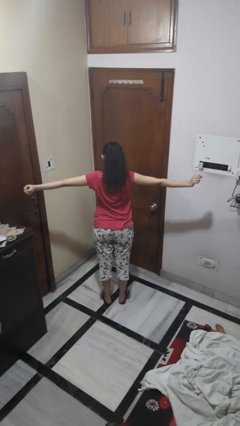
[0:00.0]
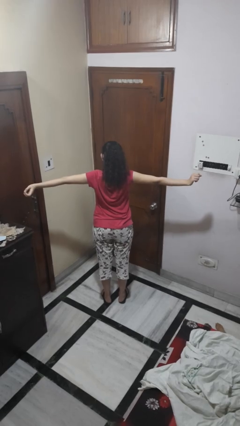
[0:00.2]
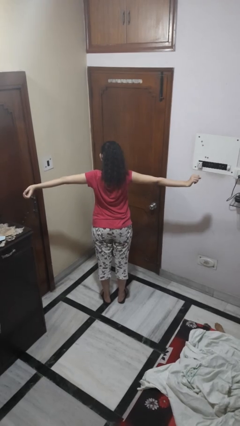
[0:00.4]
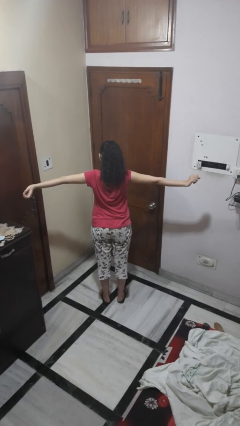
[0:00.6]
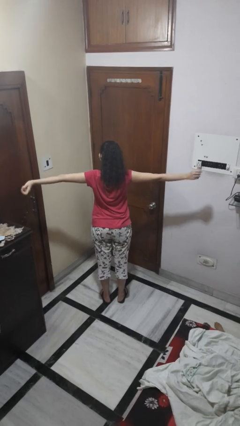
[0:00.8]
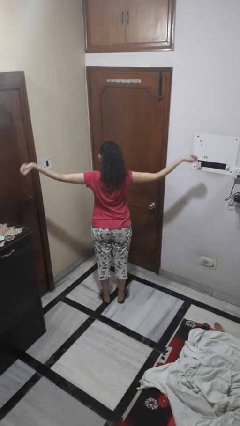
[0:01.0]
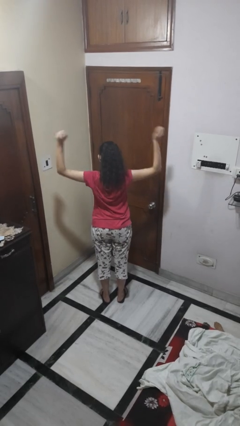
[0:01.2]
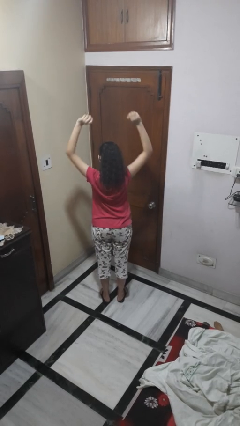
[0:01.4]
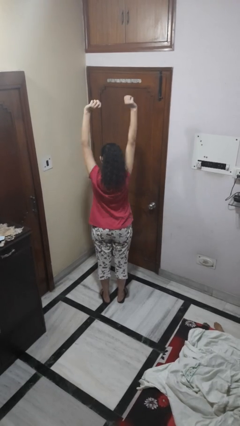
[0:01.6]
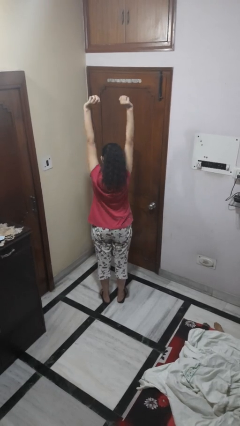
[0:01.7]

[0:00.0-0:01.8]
person stretches arms to side

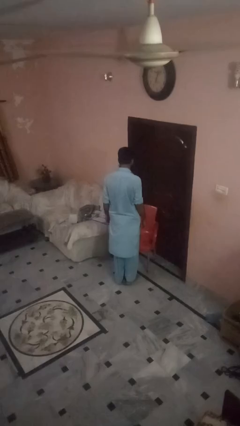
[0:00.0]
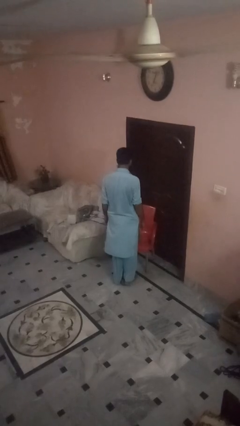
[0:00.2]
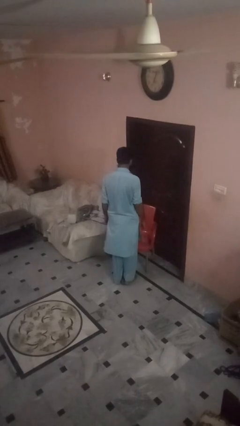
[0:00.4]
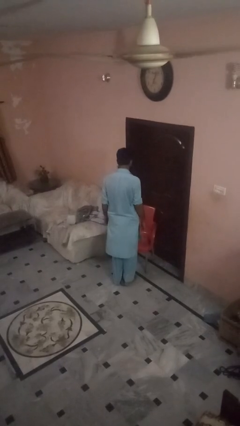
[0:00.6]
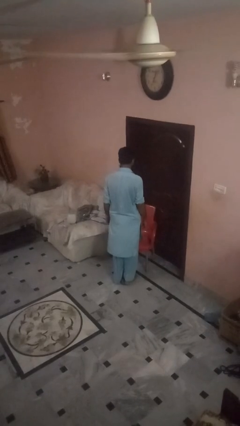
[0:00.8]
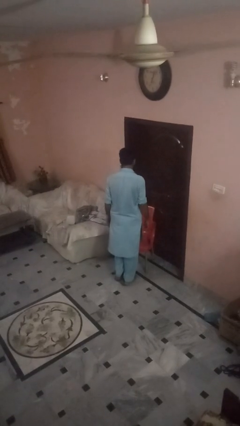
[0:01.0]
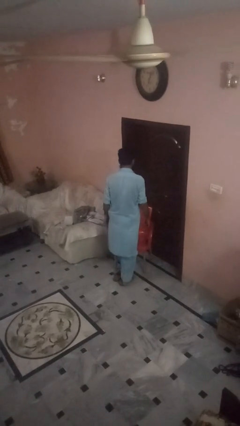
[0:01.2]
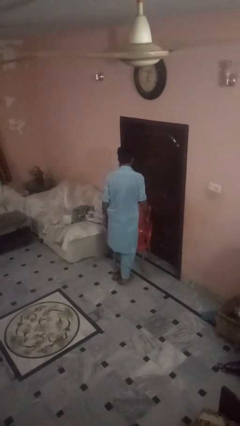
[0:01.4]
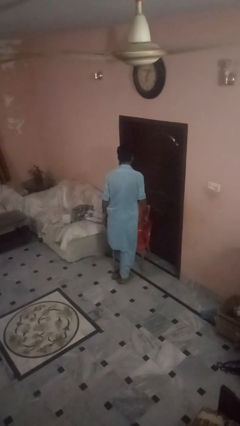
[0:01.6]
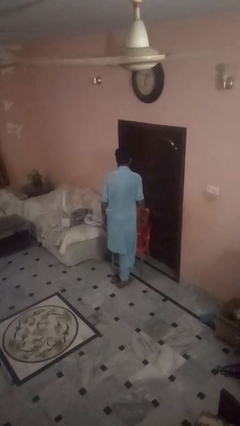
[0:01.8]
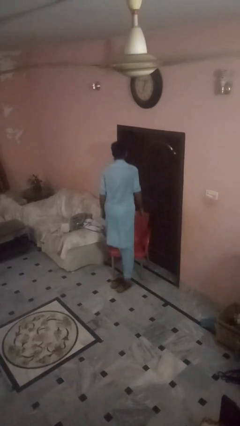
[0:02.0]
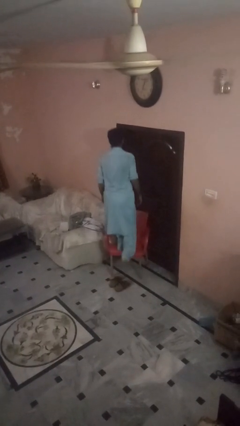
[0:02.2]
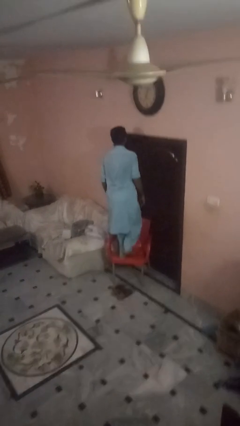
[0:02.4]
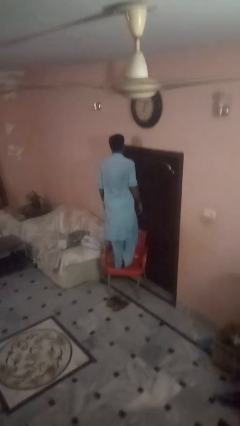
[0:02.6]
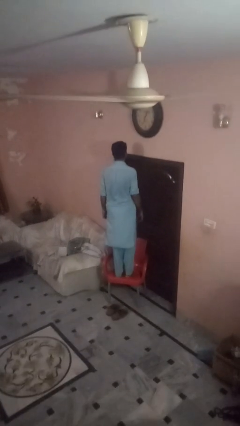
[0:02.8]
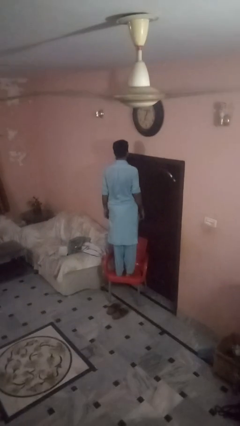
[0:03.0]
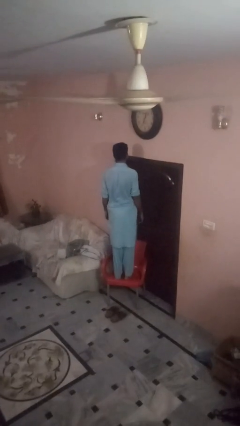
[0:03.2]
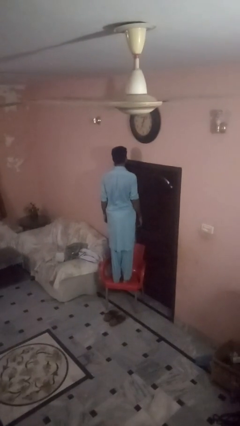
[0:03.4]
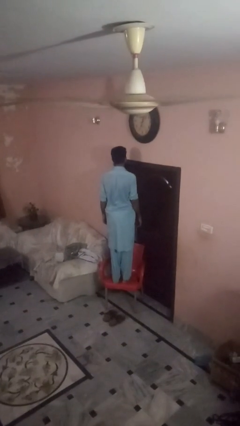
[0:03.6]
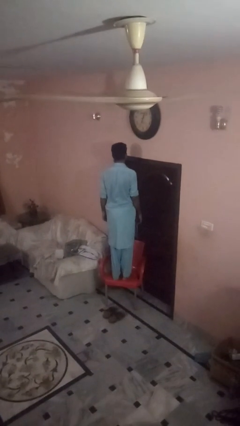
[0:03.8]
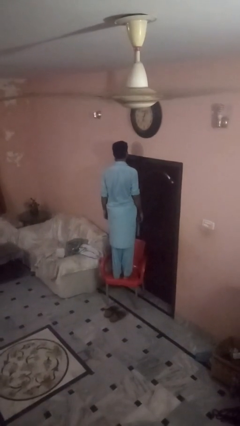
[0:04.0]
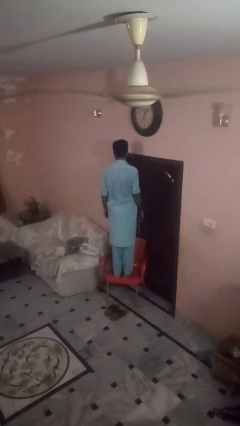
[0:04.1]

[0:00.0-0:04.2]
person climbs on chair

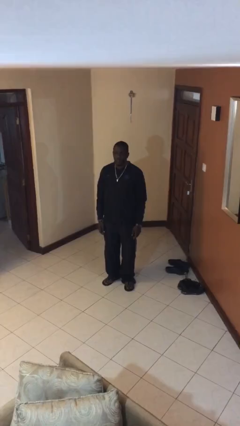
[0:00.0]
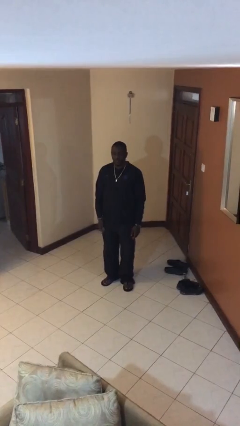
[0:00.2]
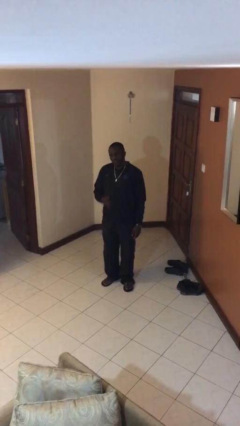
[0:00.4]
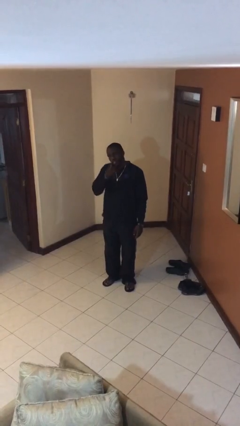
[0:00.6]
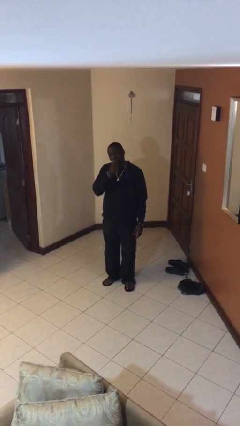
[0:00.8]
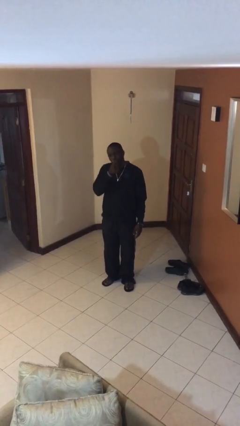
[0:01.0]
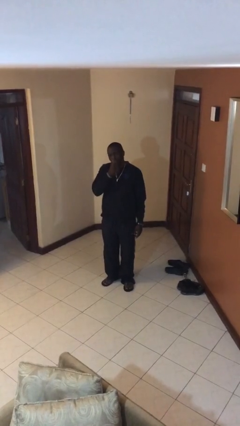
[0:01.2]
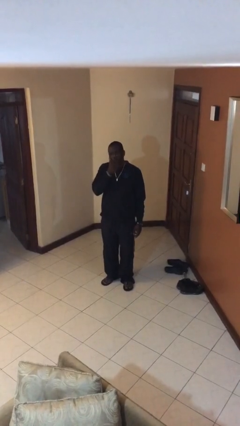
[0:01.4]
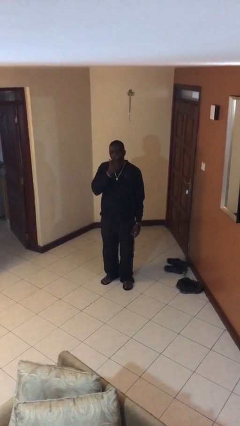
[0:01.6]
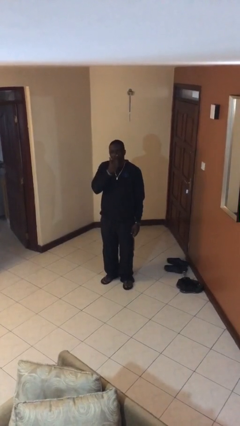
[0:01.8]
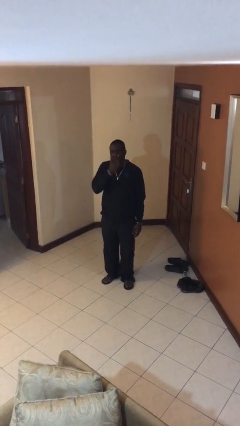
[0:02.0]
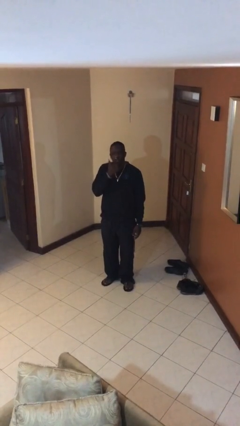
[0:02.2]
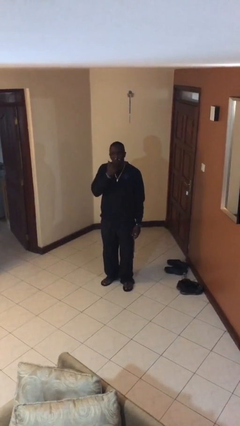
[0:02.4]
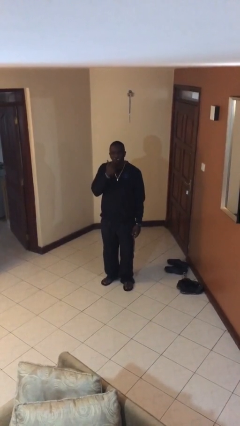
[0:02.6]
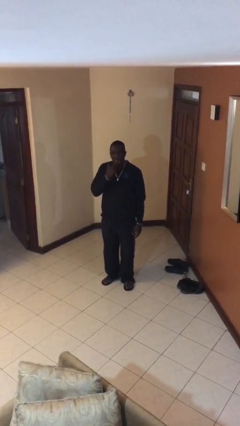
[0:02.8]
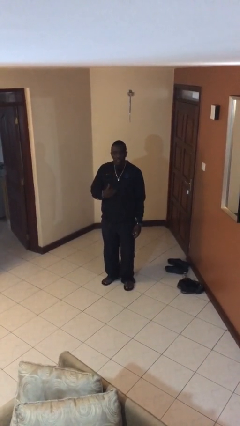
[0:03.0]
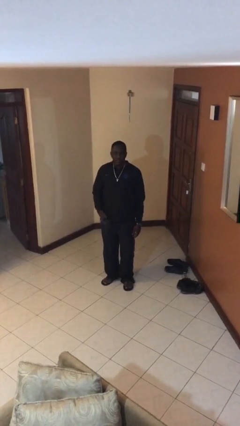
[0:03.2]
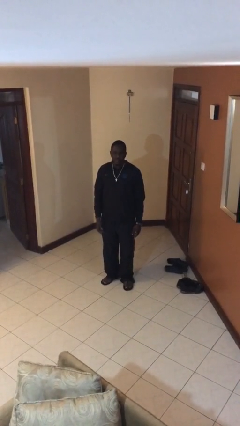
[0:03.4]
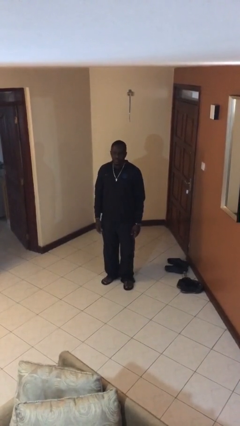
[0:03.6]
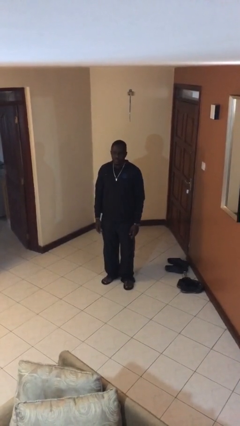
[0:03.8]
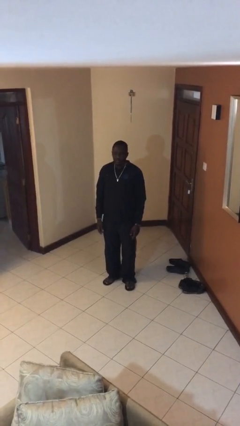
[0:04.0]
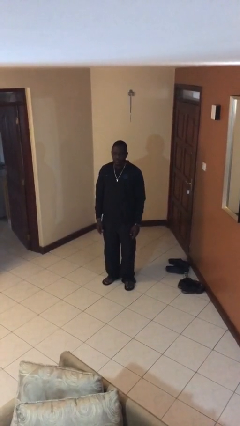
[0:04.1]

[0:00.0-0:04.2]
person licks fingers

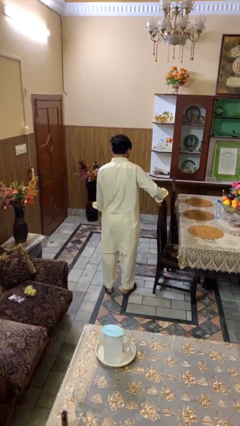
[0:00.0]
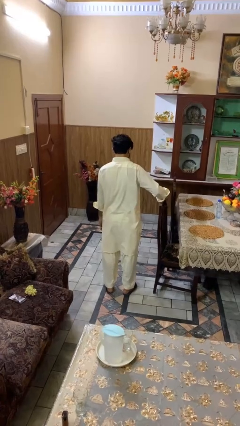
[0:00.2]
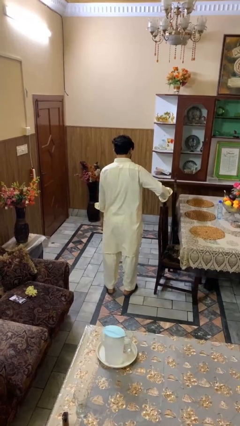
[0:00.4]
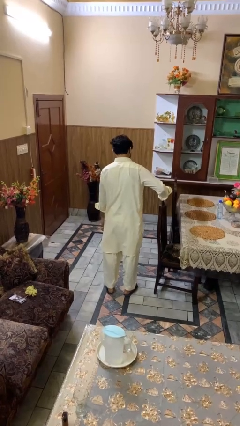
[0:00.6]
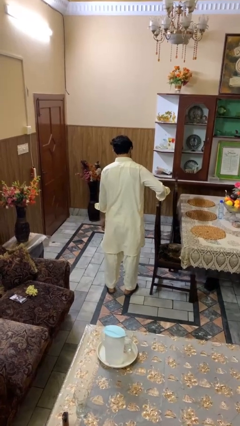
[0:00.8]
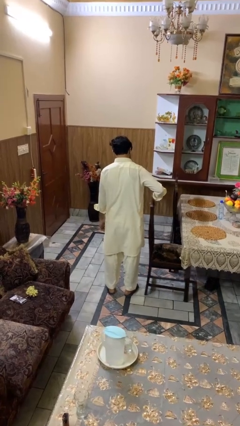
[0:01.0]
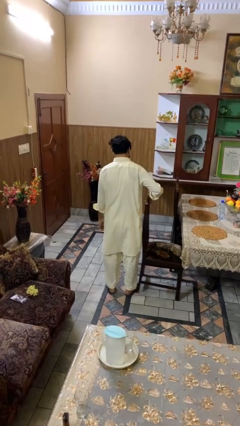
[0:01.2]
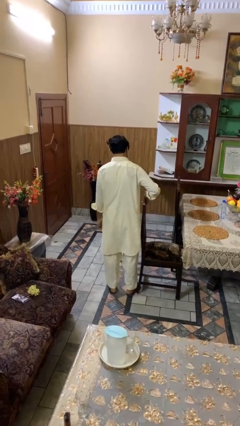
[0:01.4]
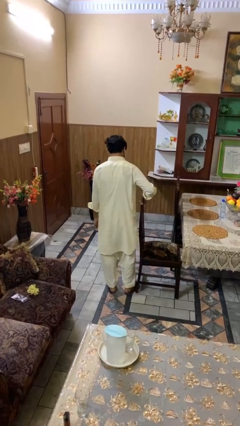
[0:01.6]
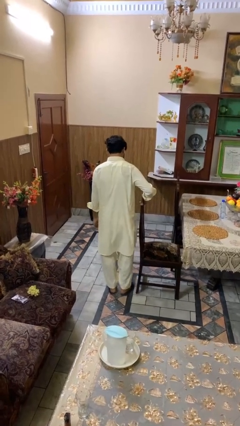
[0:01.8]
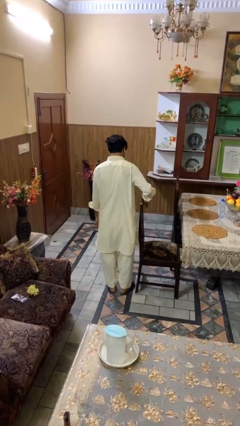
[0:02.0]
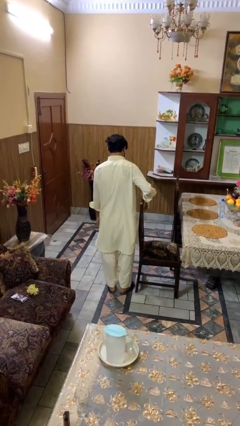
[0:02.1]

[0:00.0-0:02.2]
person pulls out chair

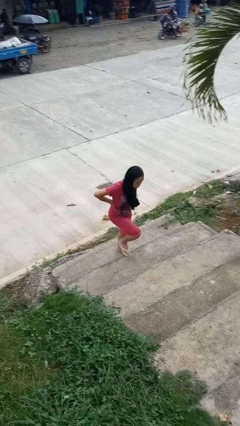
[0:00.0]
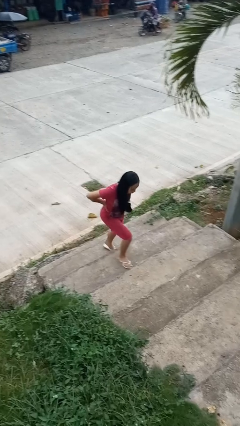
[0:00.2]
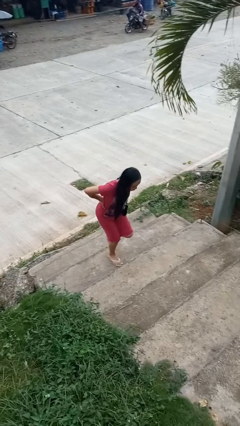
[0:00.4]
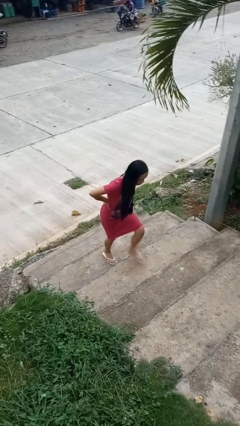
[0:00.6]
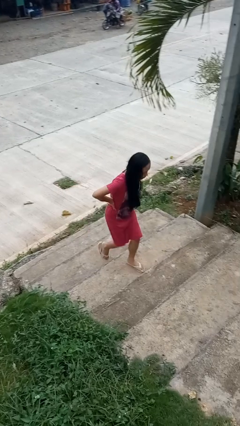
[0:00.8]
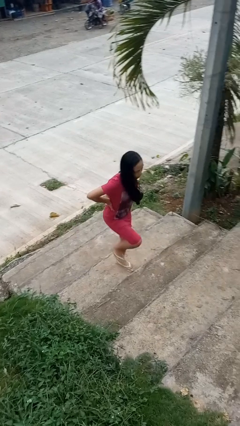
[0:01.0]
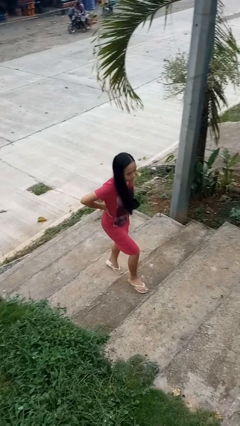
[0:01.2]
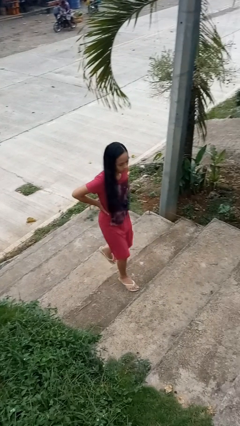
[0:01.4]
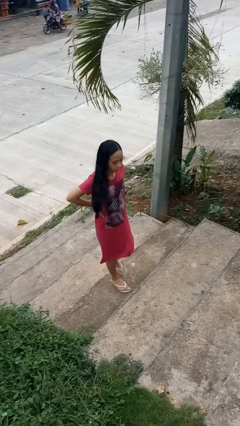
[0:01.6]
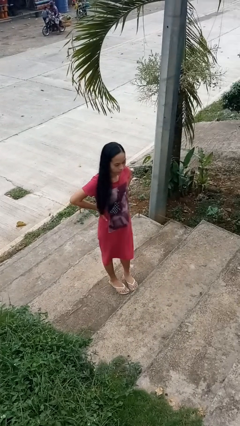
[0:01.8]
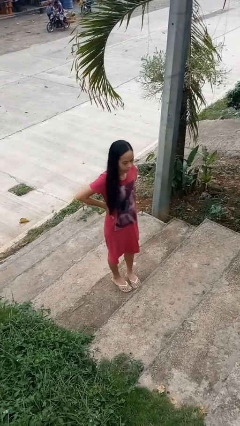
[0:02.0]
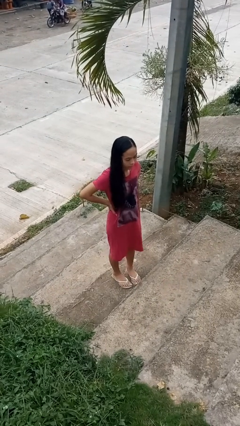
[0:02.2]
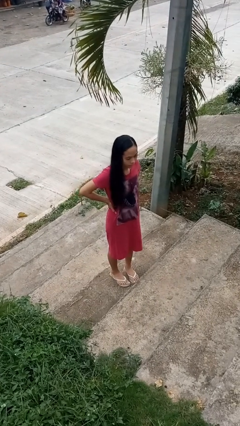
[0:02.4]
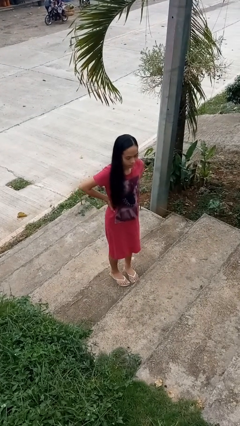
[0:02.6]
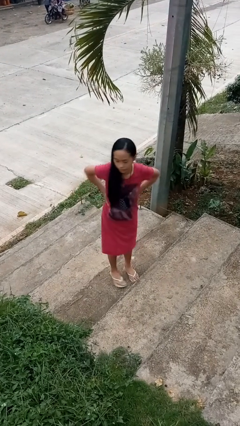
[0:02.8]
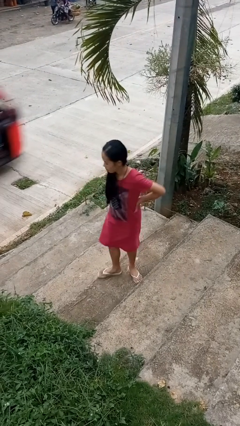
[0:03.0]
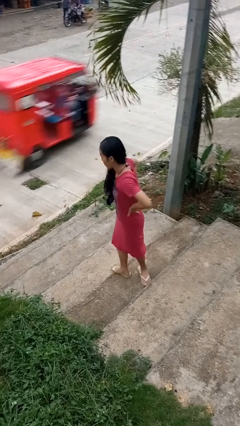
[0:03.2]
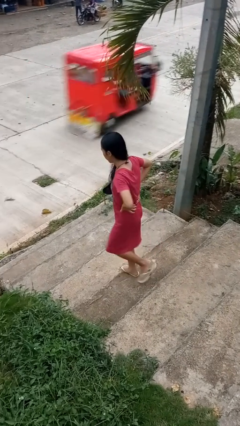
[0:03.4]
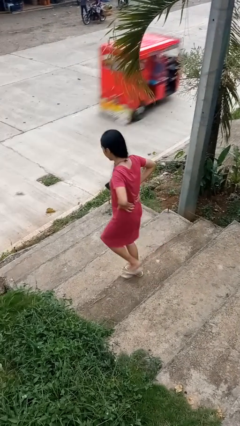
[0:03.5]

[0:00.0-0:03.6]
person climbs up stairs

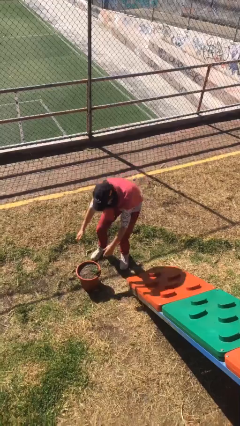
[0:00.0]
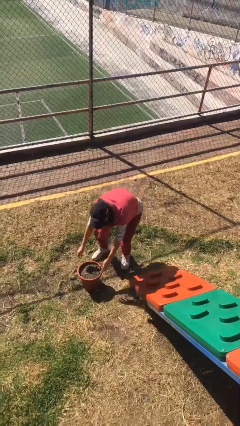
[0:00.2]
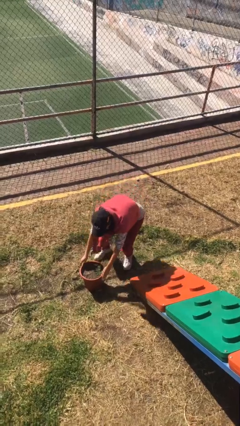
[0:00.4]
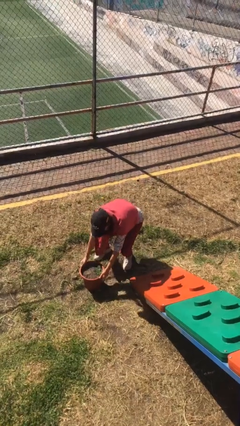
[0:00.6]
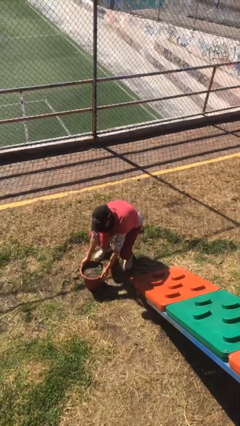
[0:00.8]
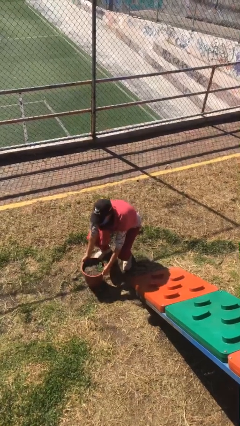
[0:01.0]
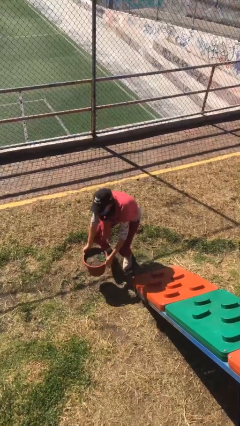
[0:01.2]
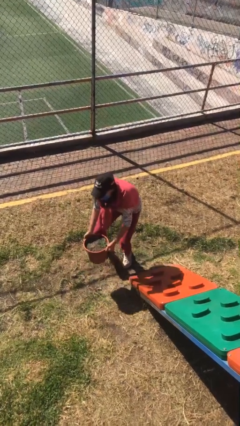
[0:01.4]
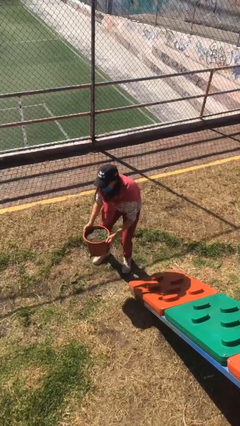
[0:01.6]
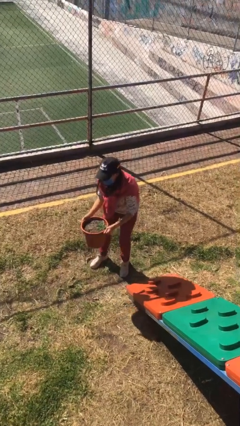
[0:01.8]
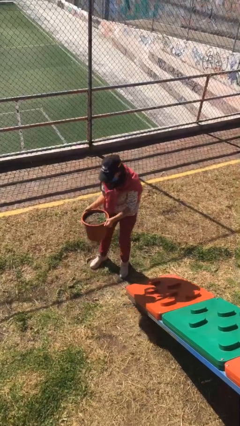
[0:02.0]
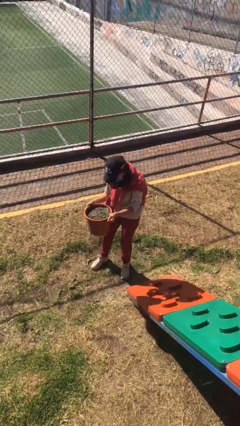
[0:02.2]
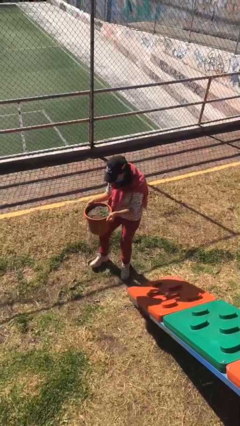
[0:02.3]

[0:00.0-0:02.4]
person picks up object from floor
